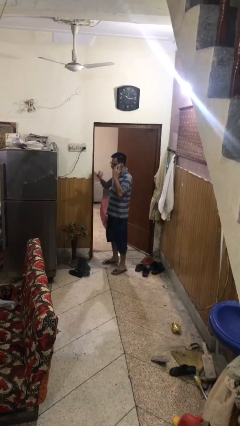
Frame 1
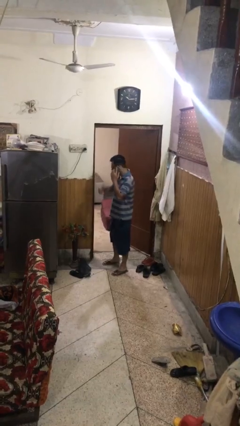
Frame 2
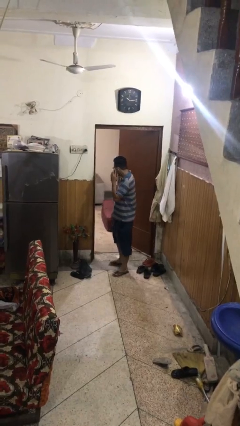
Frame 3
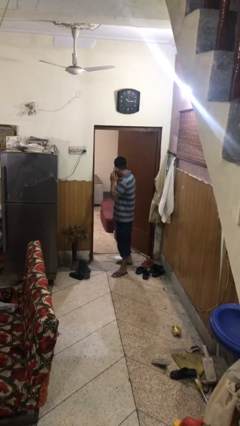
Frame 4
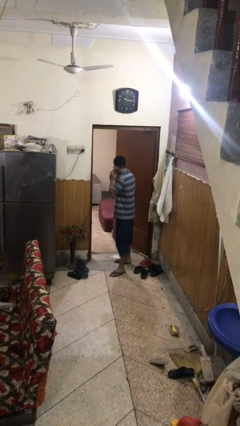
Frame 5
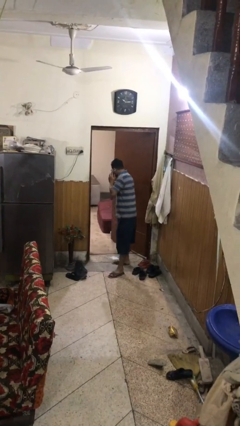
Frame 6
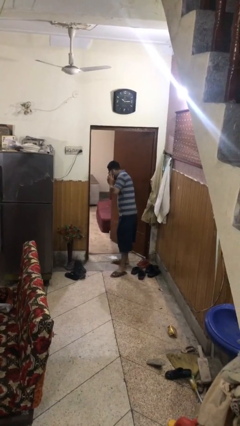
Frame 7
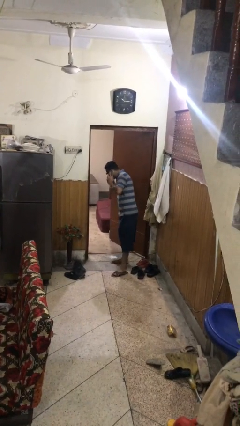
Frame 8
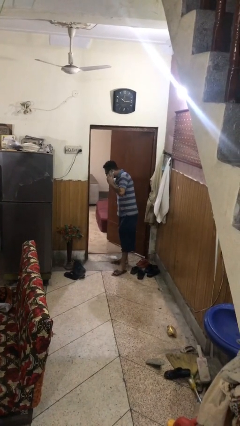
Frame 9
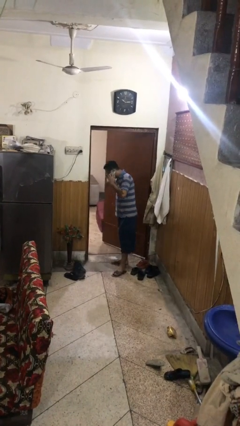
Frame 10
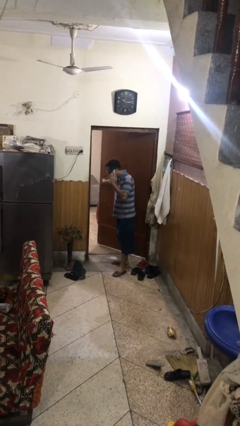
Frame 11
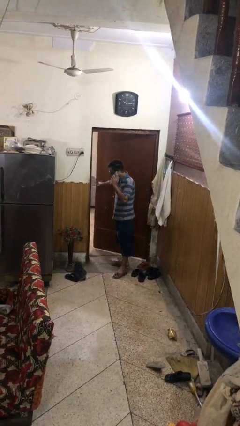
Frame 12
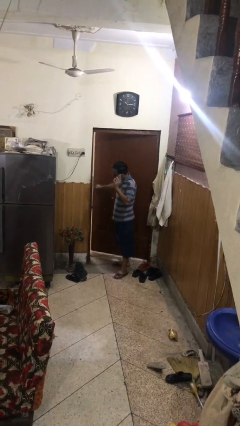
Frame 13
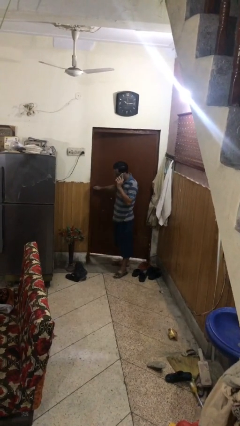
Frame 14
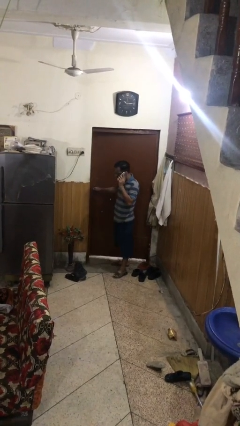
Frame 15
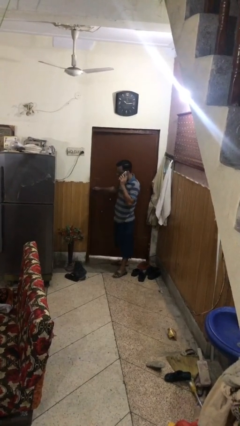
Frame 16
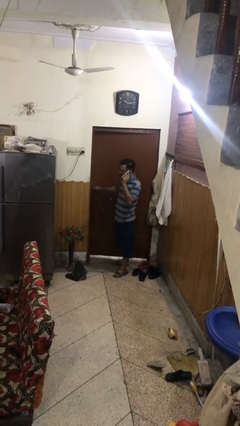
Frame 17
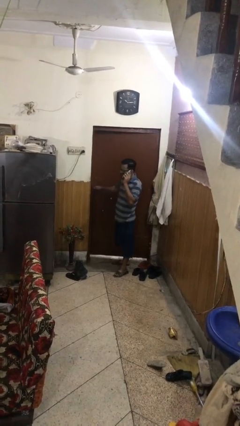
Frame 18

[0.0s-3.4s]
person closes facility door

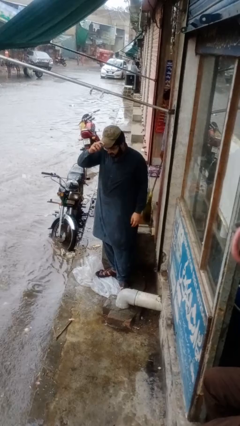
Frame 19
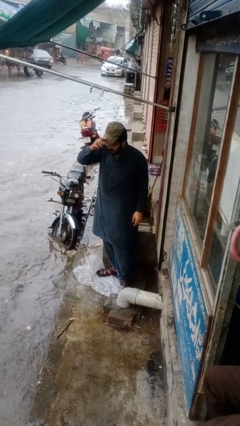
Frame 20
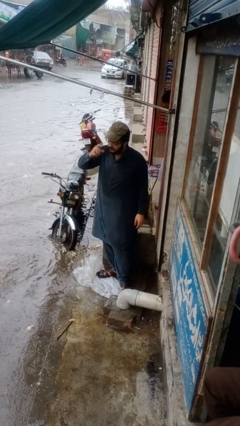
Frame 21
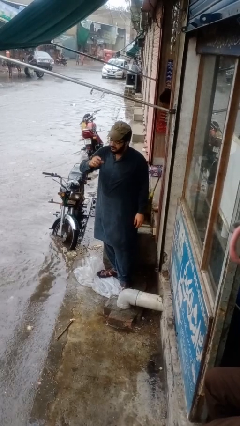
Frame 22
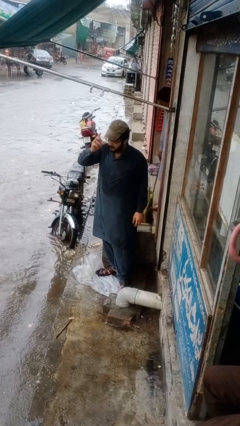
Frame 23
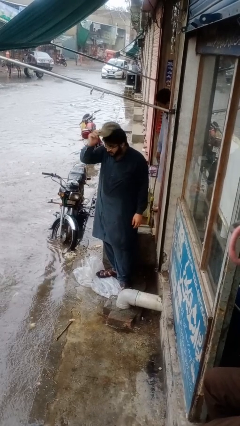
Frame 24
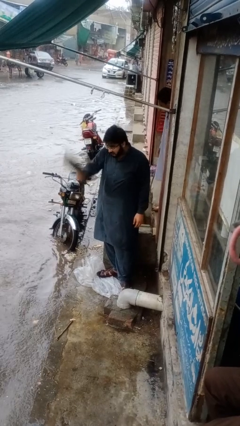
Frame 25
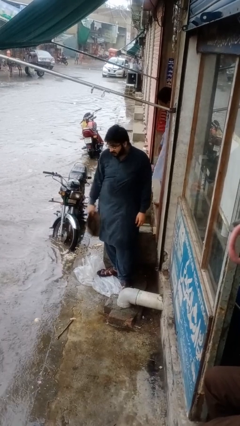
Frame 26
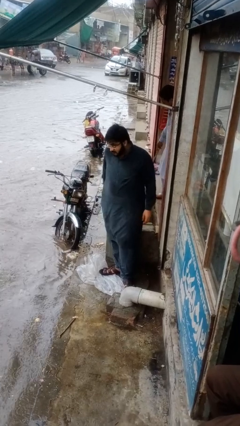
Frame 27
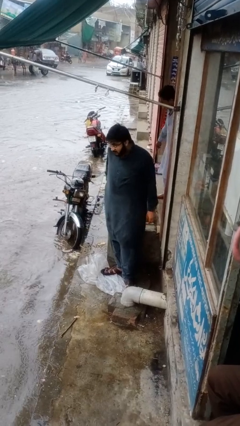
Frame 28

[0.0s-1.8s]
person takes off hat

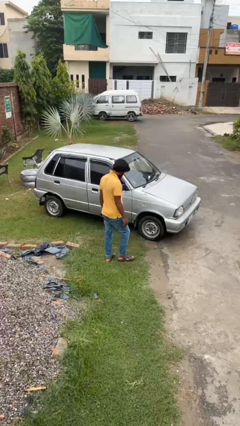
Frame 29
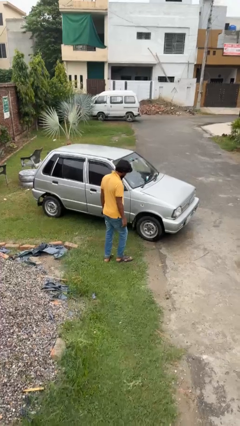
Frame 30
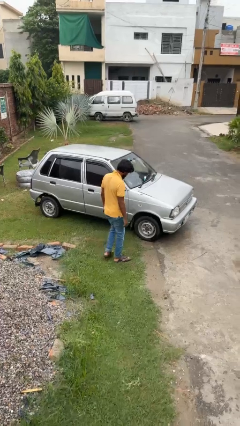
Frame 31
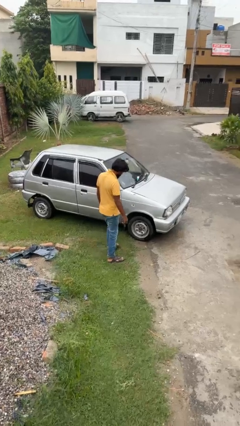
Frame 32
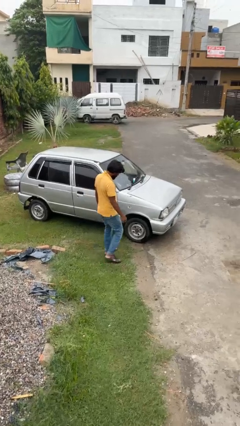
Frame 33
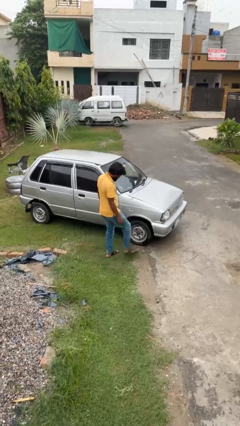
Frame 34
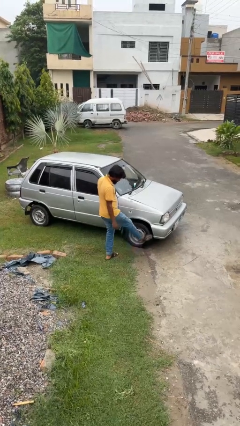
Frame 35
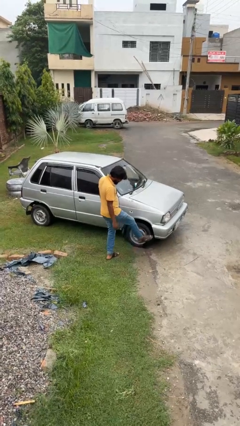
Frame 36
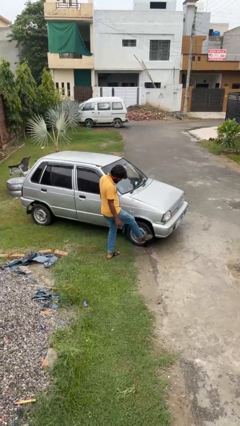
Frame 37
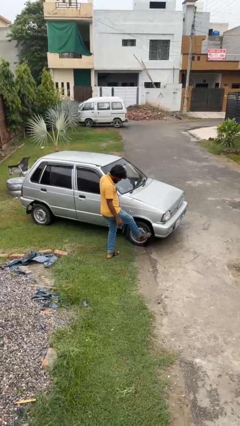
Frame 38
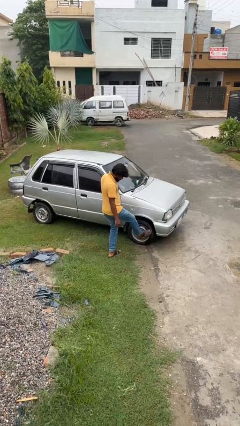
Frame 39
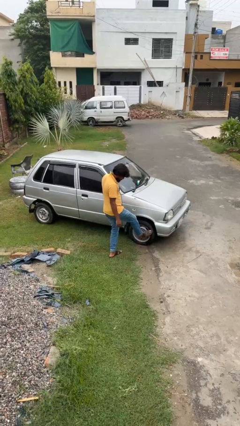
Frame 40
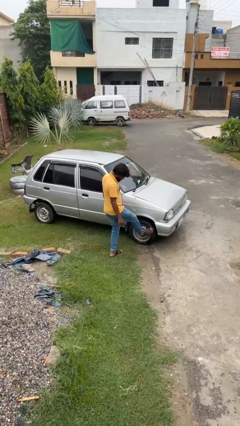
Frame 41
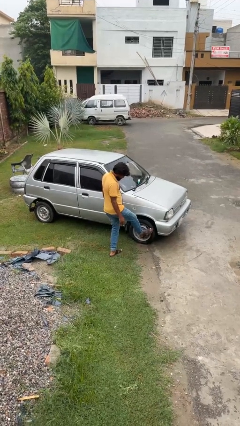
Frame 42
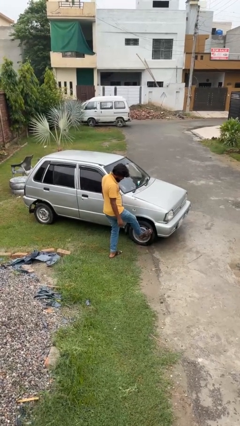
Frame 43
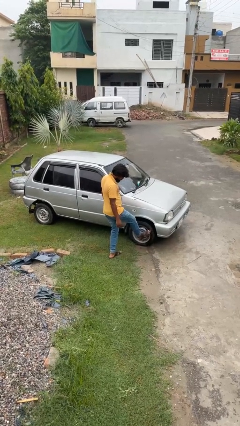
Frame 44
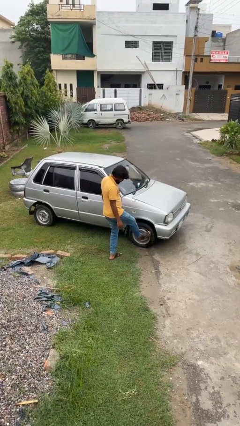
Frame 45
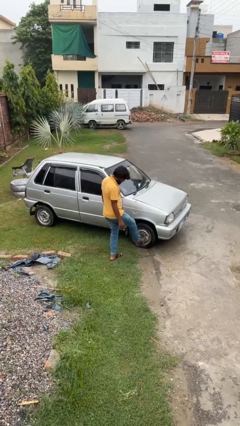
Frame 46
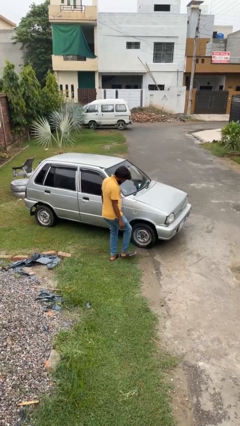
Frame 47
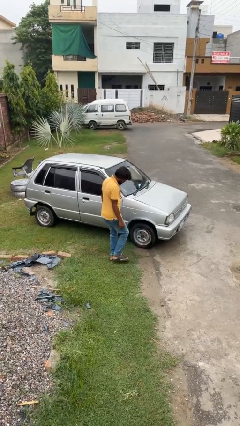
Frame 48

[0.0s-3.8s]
person kicks car tires

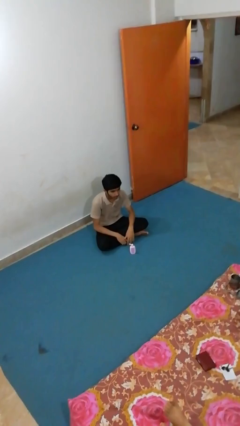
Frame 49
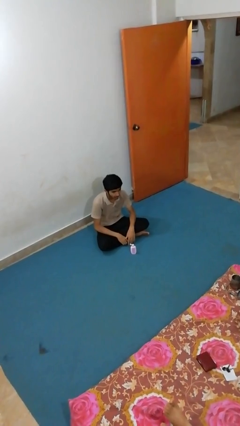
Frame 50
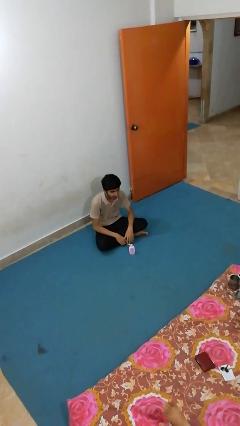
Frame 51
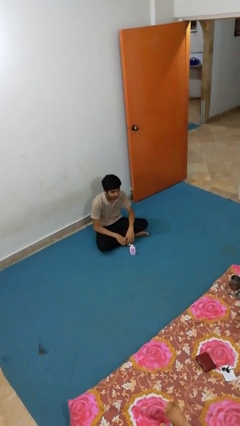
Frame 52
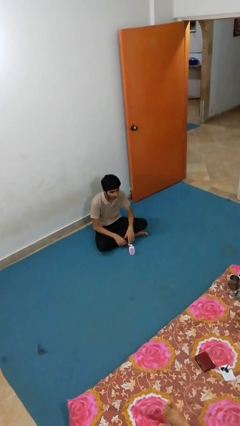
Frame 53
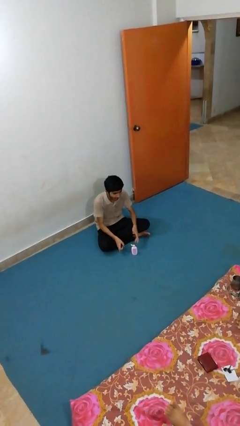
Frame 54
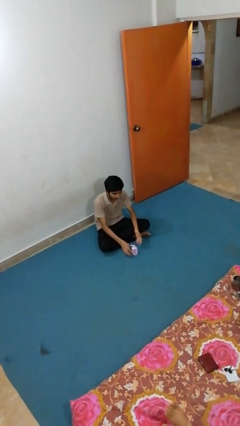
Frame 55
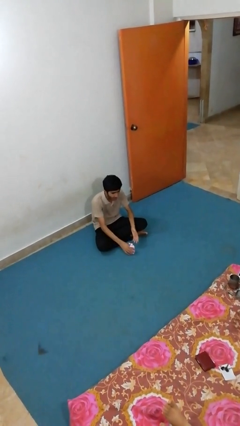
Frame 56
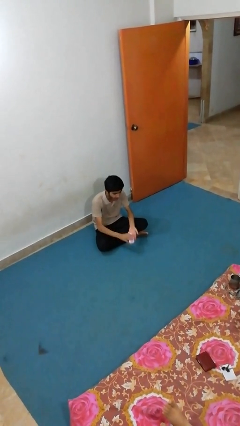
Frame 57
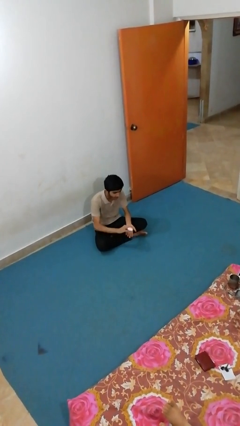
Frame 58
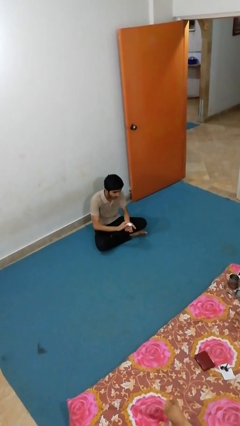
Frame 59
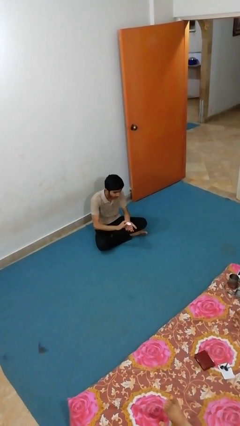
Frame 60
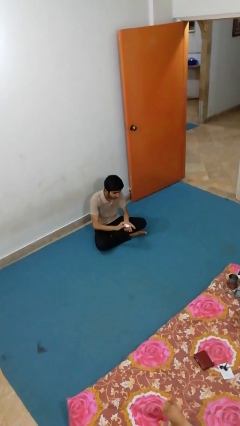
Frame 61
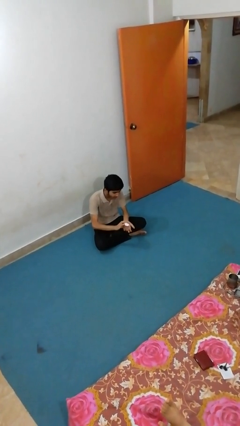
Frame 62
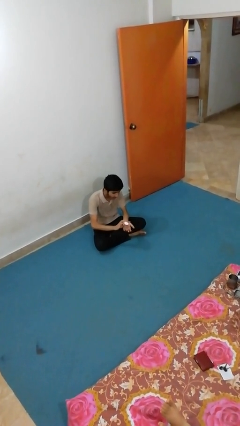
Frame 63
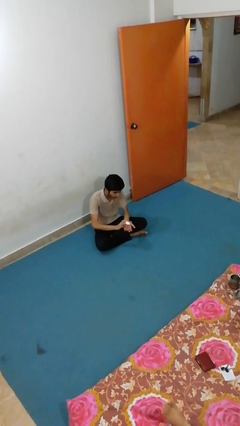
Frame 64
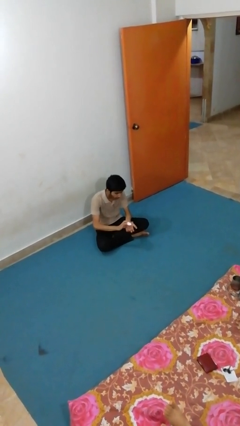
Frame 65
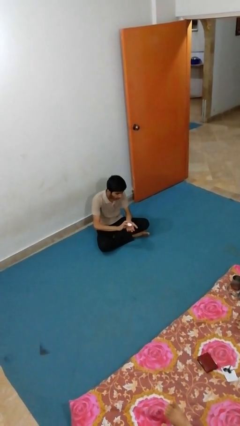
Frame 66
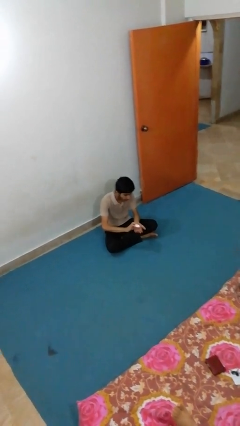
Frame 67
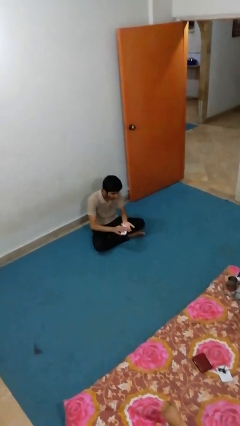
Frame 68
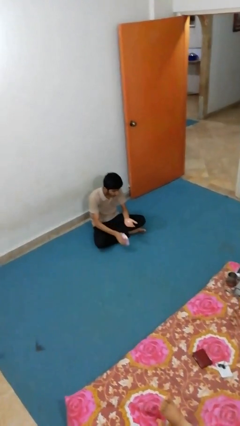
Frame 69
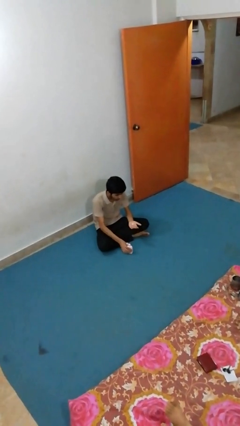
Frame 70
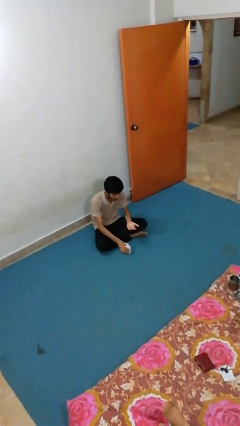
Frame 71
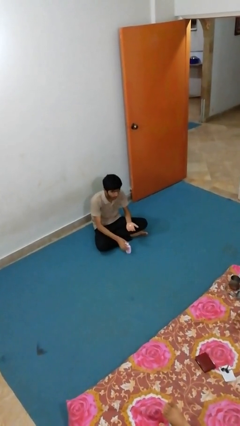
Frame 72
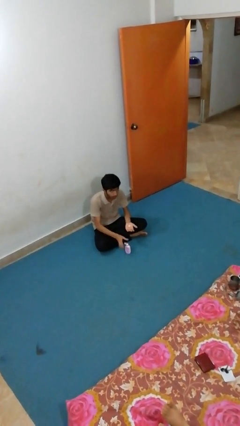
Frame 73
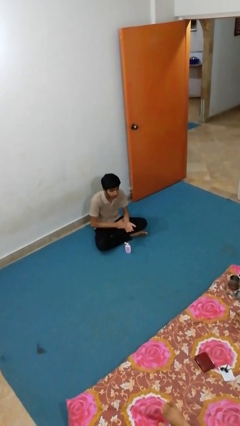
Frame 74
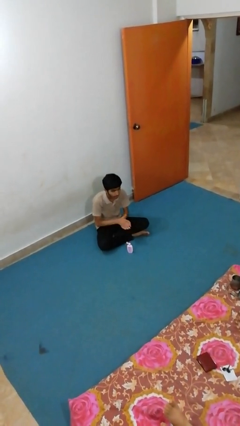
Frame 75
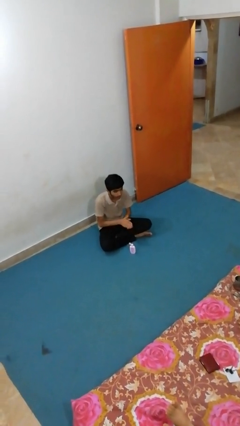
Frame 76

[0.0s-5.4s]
person applies sunscreen

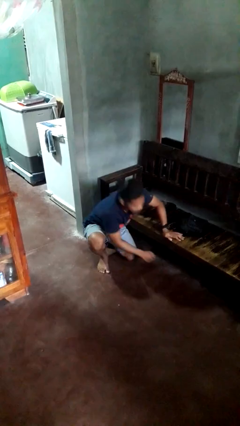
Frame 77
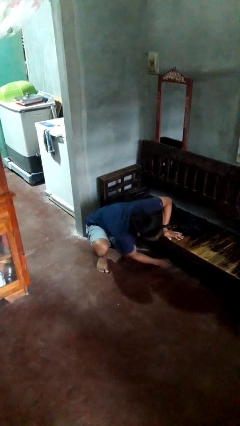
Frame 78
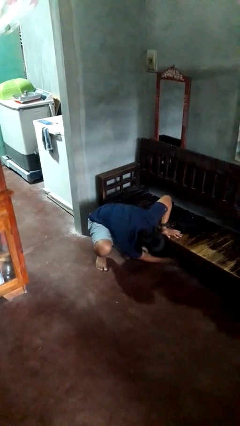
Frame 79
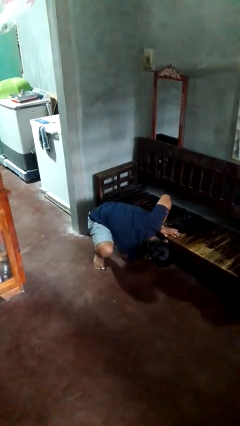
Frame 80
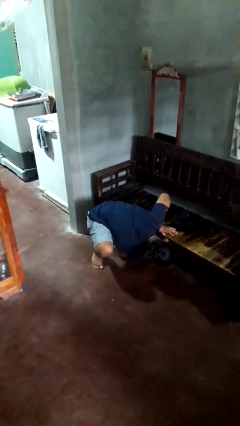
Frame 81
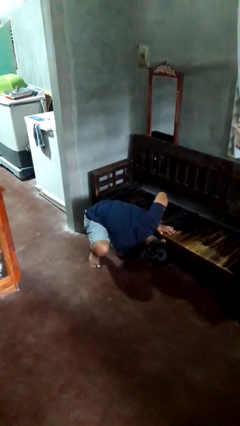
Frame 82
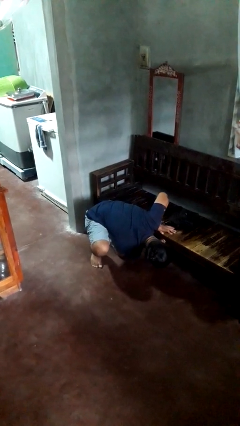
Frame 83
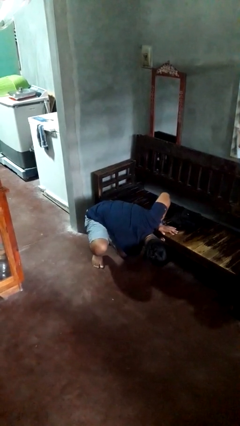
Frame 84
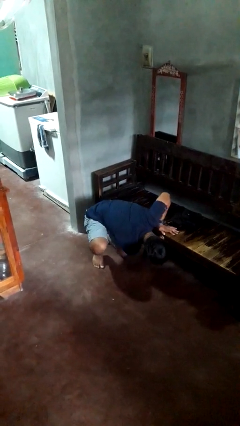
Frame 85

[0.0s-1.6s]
person searches under couch

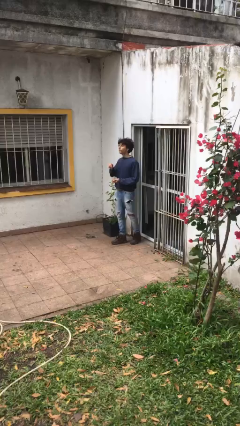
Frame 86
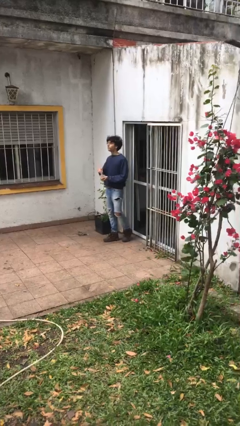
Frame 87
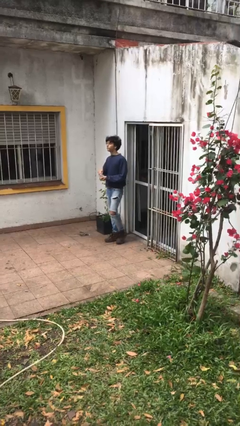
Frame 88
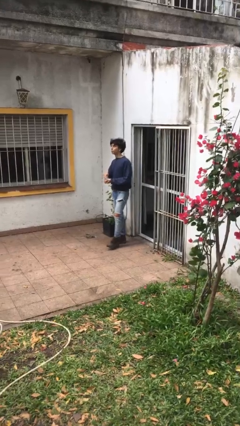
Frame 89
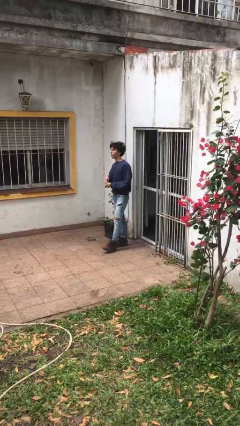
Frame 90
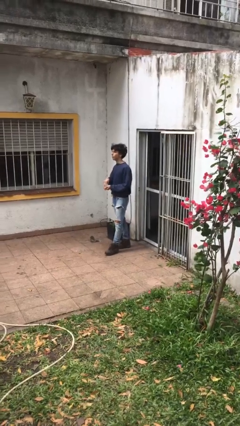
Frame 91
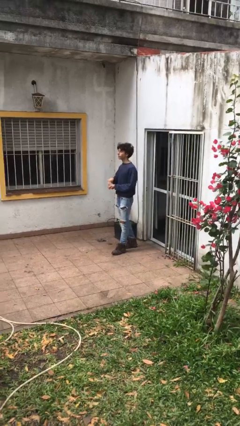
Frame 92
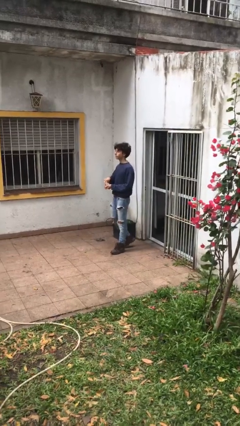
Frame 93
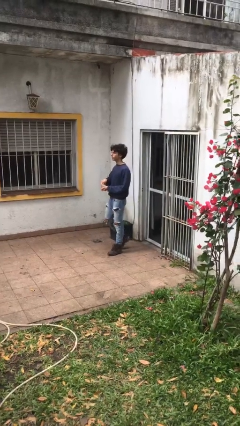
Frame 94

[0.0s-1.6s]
person eats snack from bag
